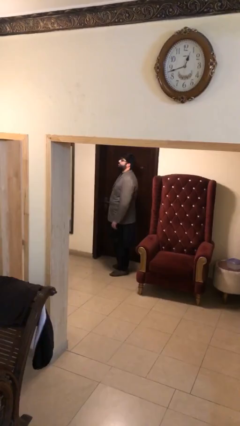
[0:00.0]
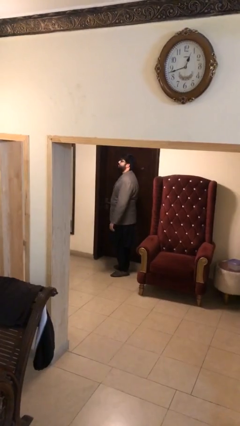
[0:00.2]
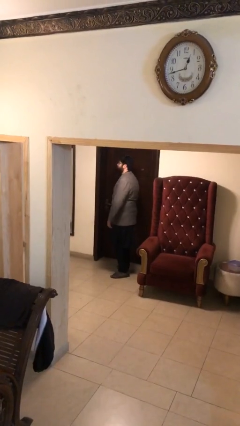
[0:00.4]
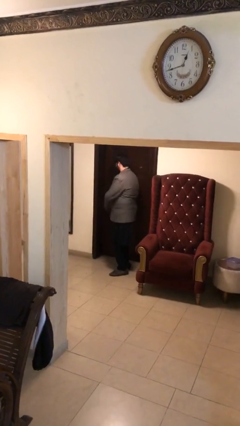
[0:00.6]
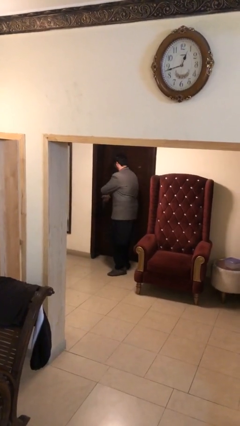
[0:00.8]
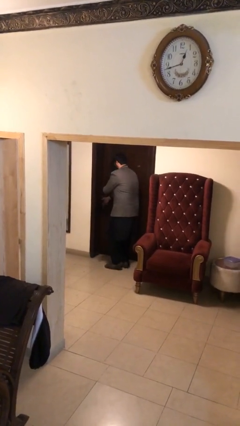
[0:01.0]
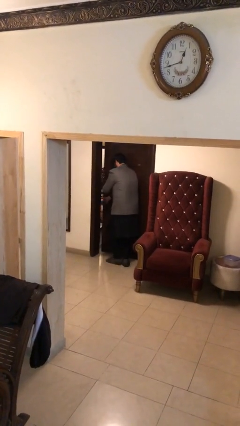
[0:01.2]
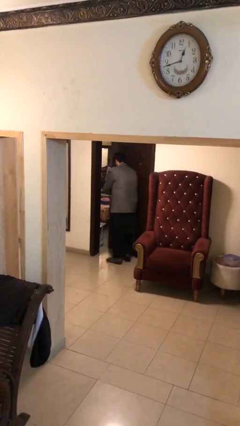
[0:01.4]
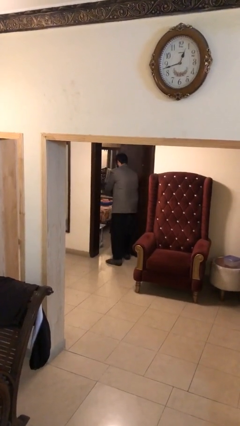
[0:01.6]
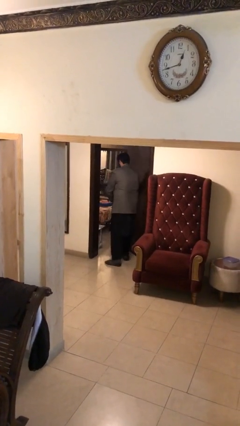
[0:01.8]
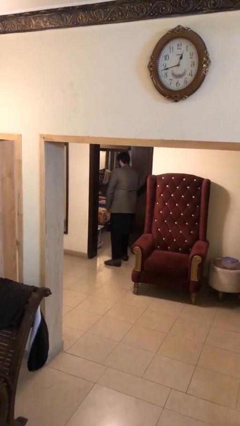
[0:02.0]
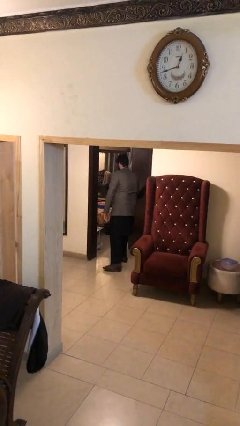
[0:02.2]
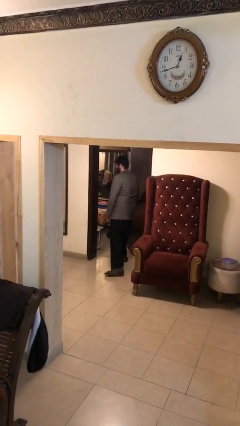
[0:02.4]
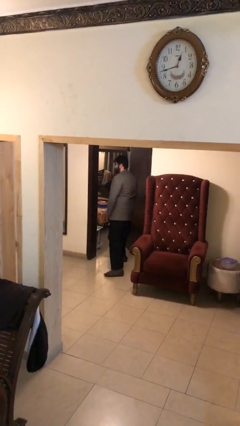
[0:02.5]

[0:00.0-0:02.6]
person opens facility door

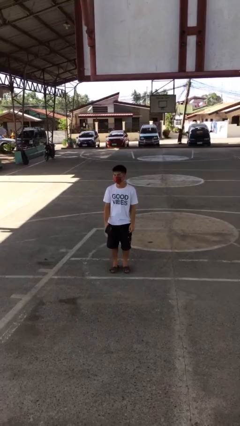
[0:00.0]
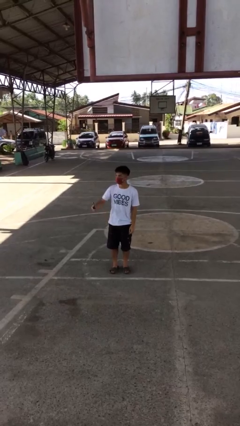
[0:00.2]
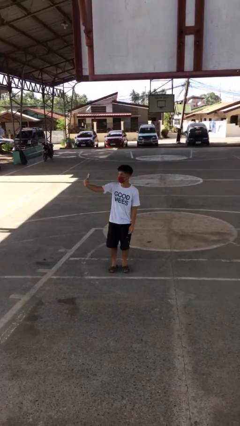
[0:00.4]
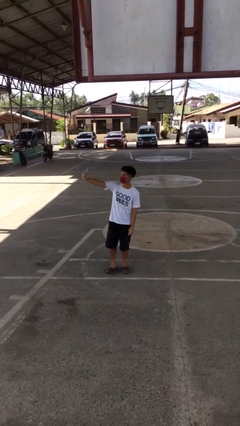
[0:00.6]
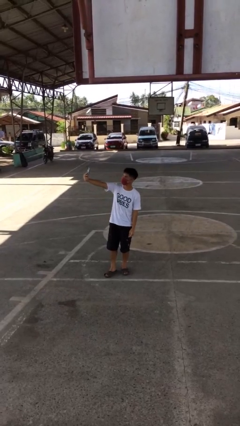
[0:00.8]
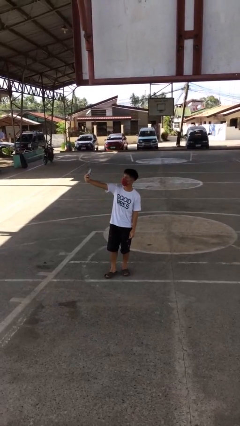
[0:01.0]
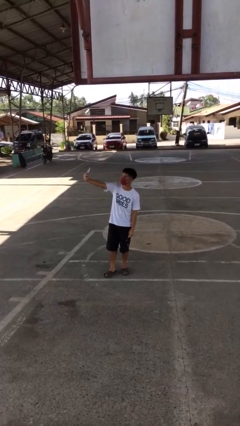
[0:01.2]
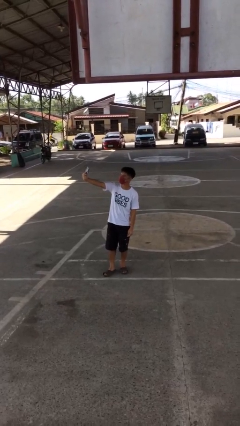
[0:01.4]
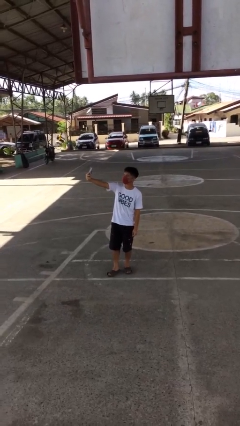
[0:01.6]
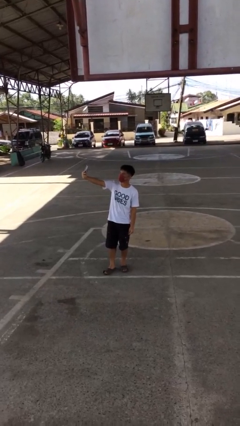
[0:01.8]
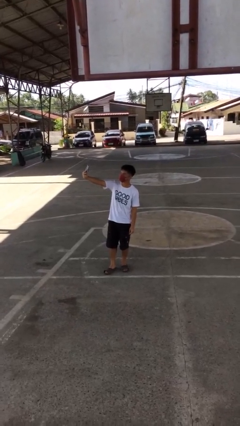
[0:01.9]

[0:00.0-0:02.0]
person takes selfie

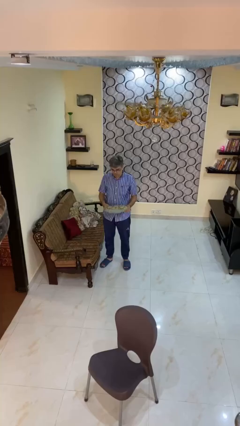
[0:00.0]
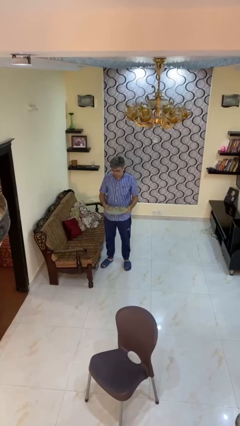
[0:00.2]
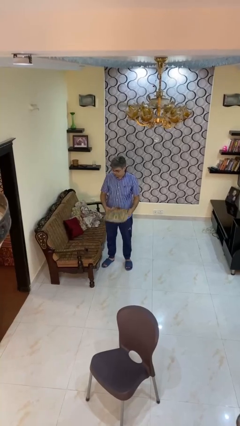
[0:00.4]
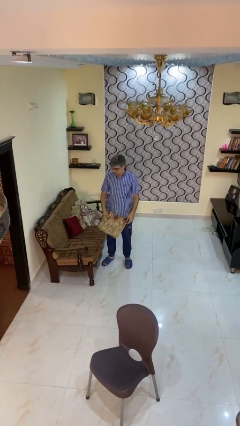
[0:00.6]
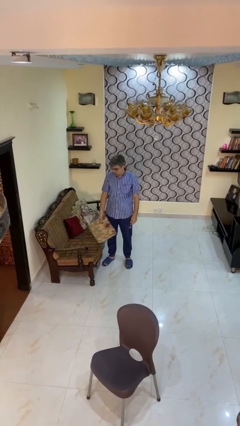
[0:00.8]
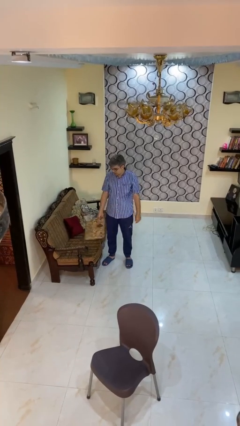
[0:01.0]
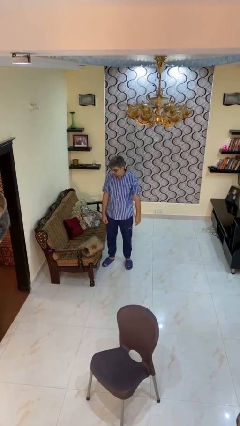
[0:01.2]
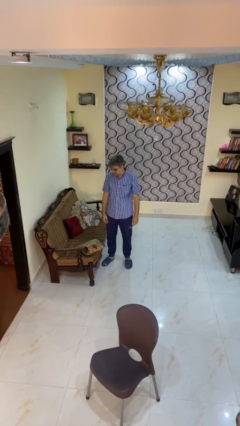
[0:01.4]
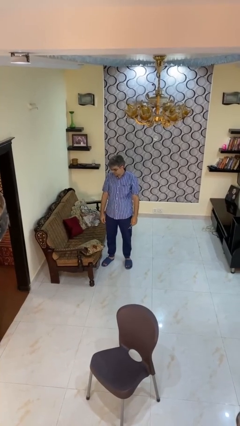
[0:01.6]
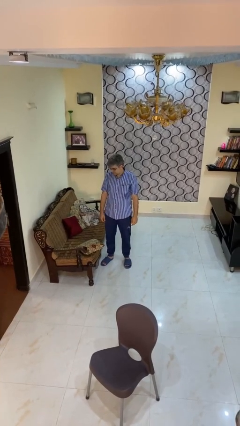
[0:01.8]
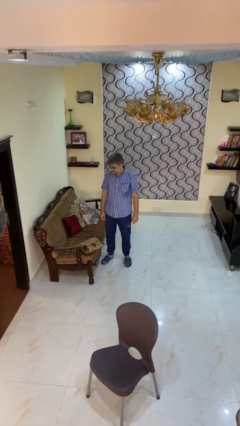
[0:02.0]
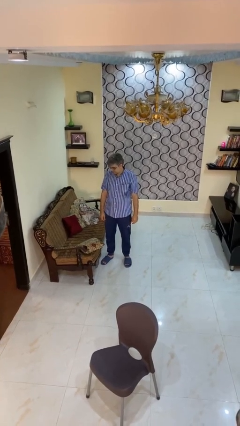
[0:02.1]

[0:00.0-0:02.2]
person puts down object on couch

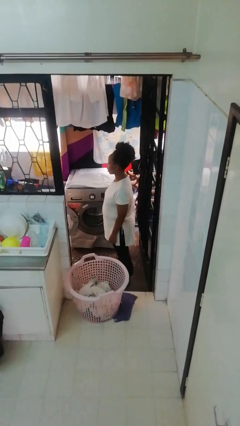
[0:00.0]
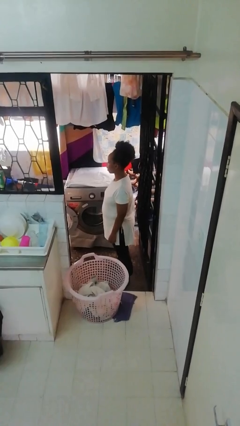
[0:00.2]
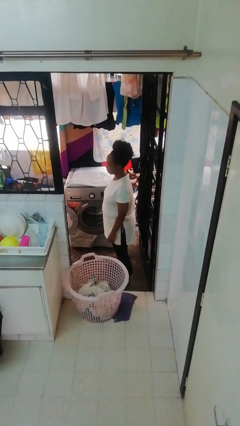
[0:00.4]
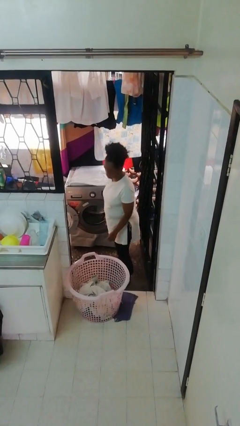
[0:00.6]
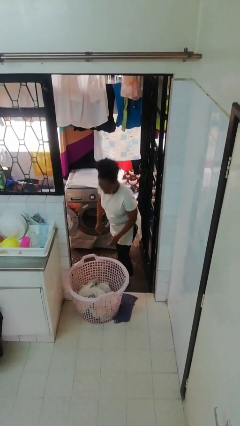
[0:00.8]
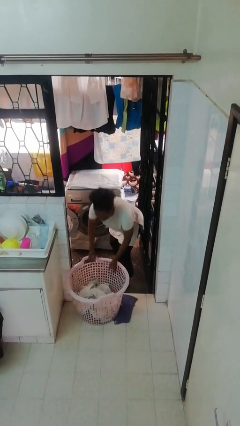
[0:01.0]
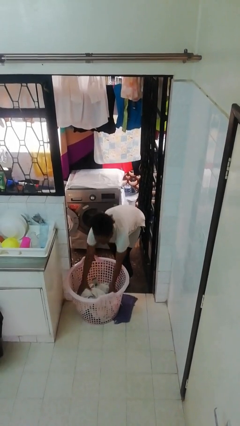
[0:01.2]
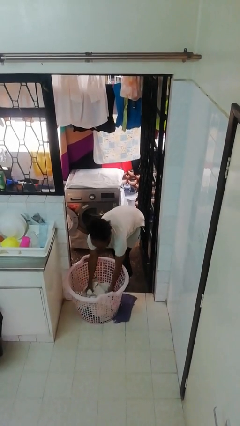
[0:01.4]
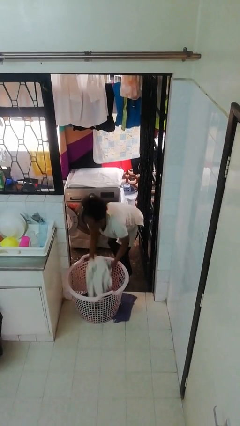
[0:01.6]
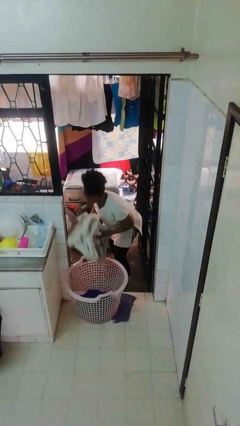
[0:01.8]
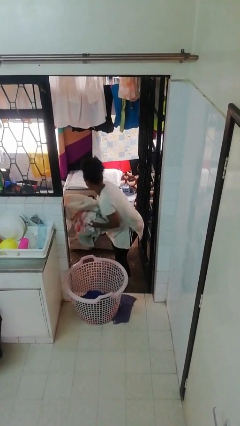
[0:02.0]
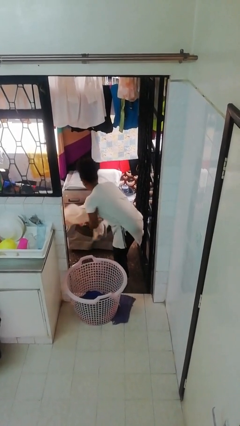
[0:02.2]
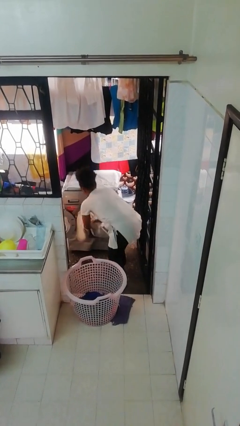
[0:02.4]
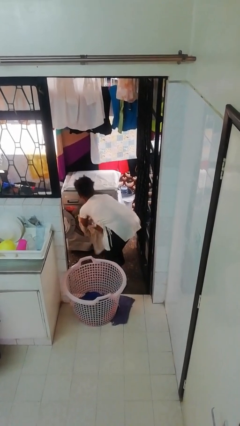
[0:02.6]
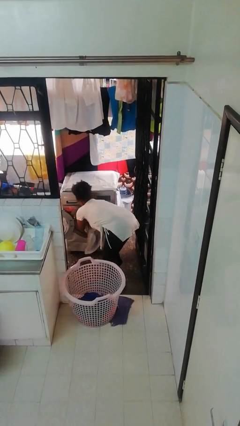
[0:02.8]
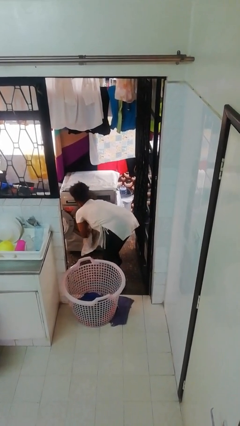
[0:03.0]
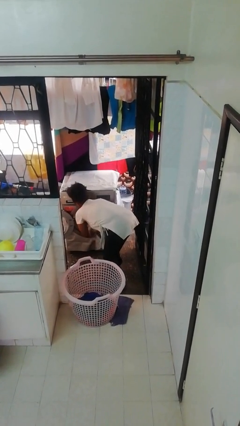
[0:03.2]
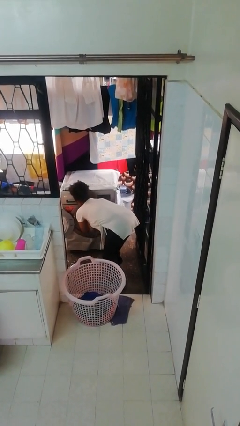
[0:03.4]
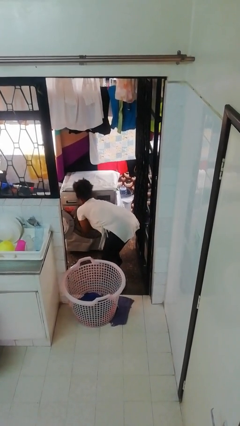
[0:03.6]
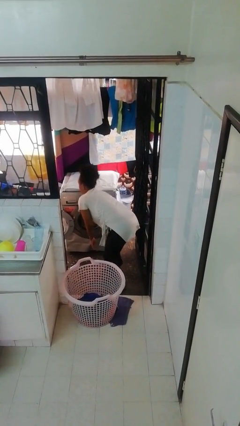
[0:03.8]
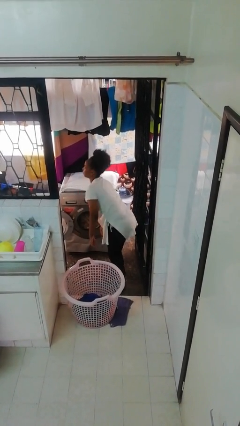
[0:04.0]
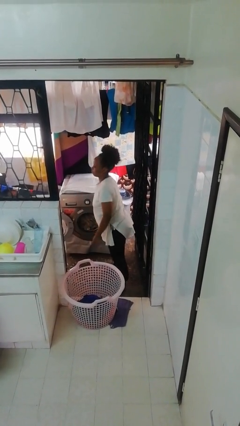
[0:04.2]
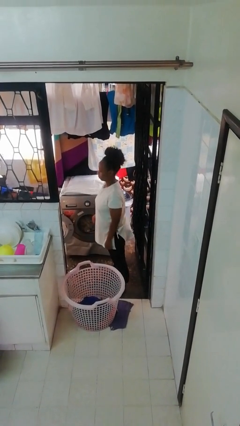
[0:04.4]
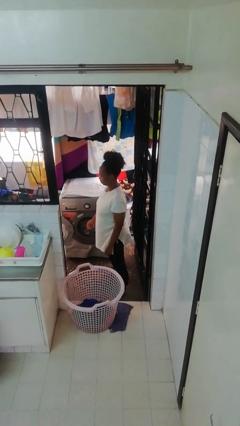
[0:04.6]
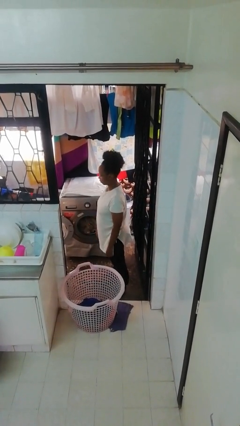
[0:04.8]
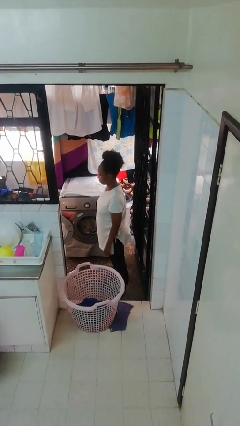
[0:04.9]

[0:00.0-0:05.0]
person loads dryer

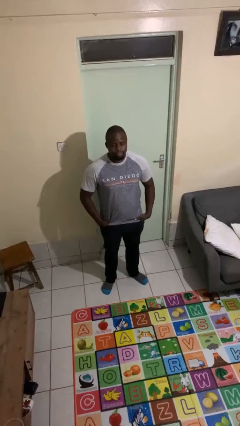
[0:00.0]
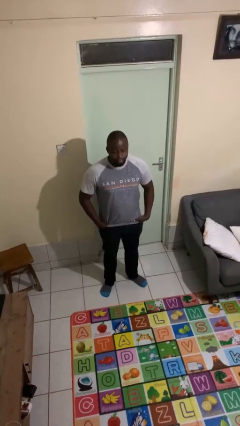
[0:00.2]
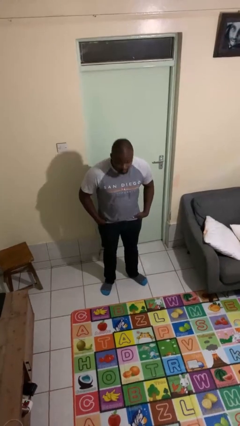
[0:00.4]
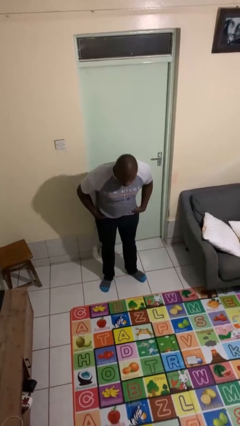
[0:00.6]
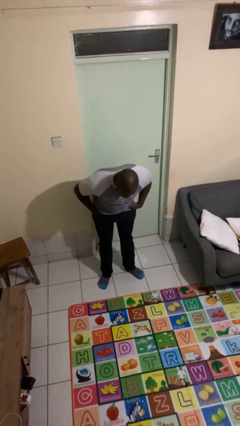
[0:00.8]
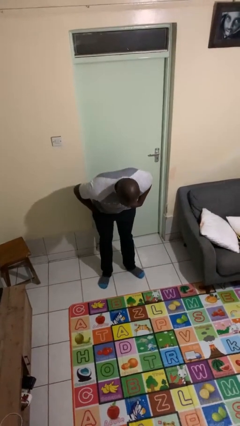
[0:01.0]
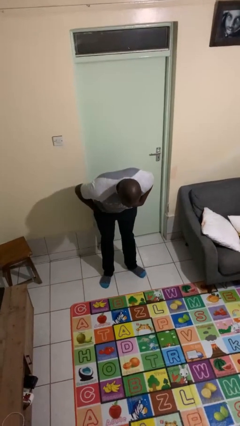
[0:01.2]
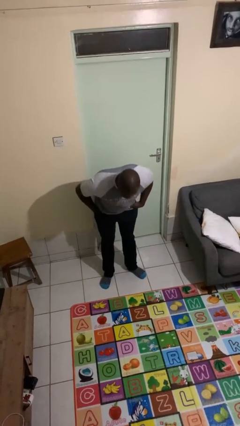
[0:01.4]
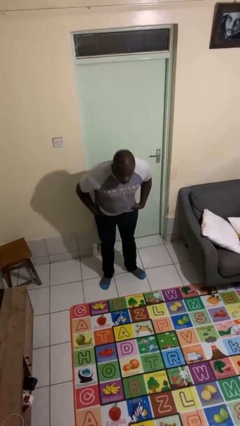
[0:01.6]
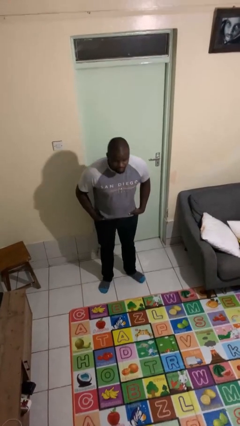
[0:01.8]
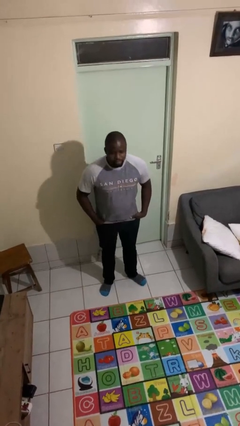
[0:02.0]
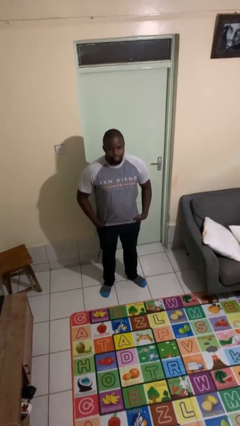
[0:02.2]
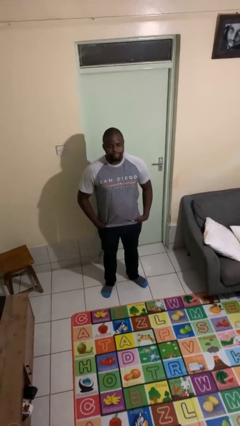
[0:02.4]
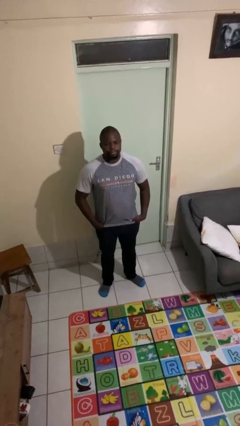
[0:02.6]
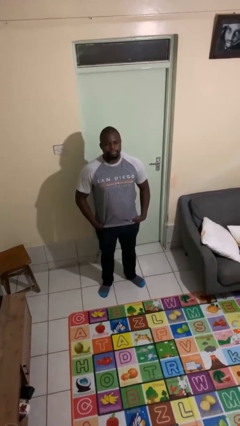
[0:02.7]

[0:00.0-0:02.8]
person bows

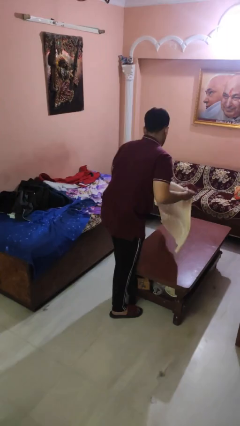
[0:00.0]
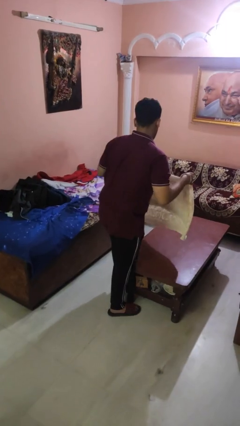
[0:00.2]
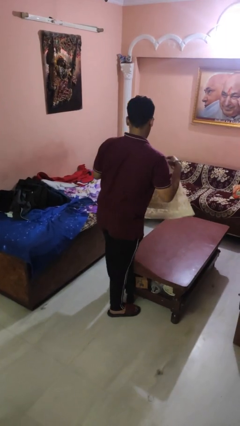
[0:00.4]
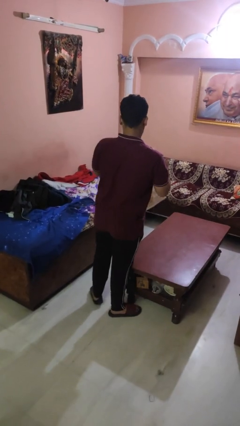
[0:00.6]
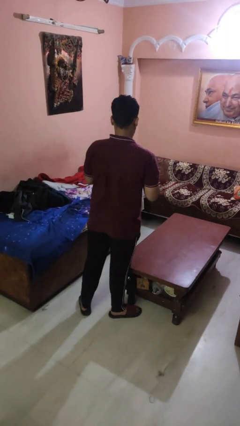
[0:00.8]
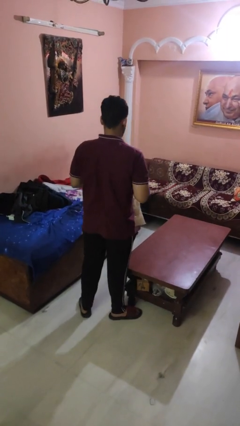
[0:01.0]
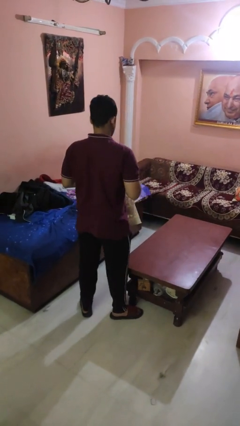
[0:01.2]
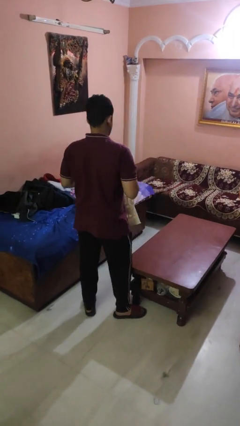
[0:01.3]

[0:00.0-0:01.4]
person folds tablecloth

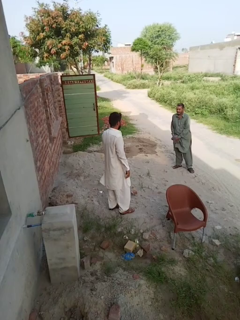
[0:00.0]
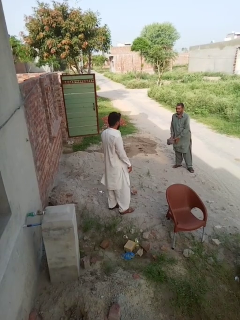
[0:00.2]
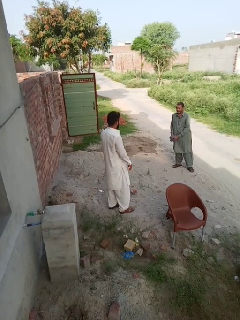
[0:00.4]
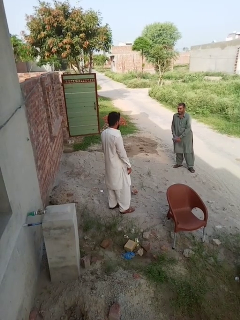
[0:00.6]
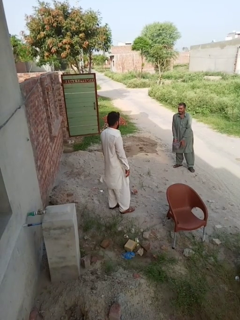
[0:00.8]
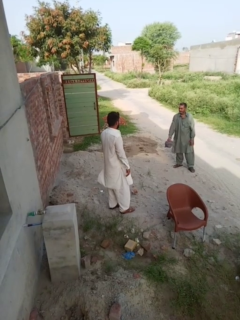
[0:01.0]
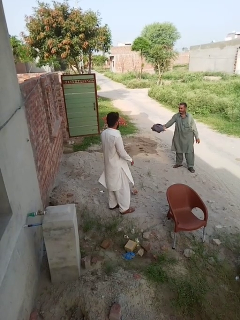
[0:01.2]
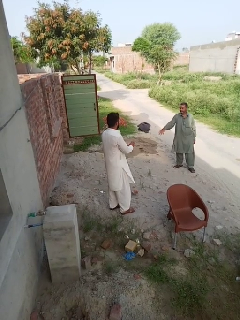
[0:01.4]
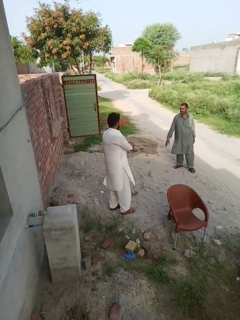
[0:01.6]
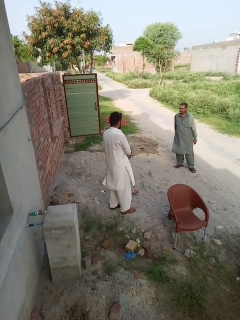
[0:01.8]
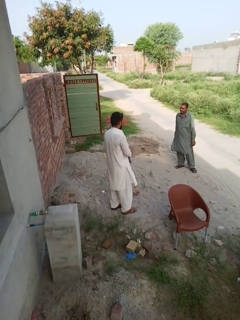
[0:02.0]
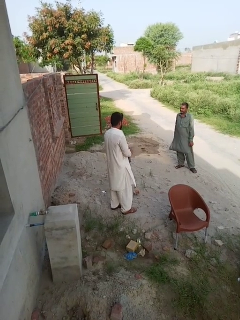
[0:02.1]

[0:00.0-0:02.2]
person catches object from person
